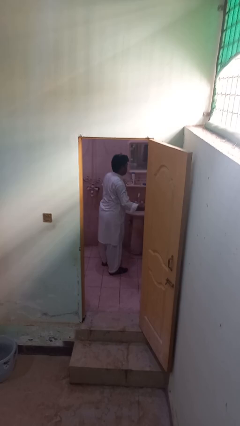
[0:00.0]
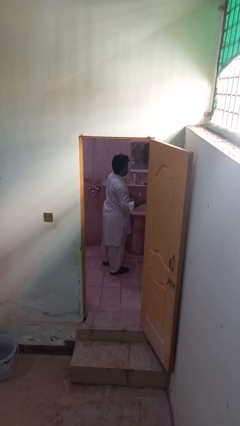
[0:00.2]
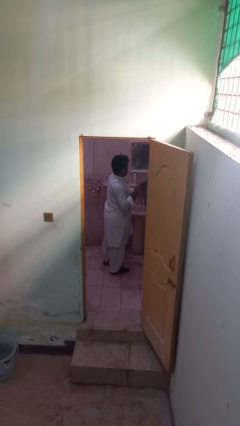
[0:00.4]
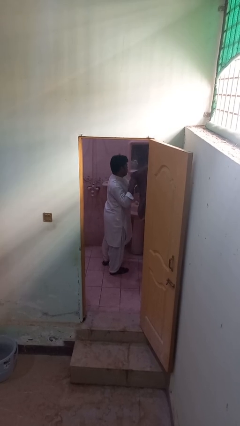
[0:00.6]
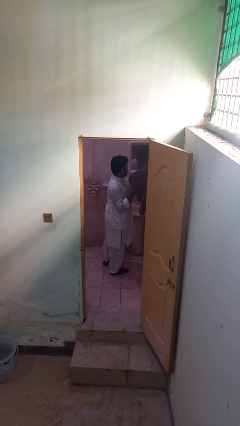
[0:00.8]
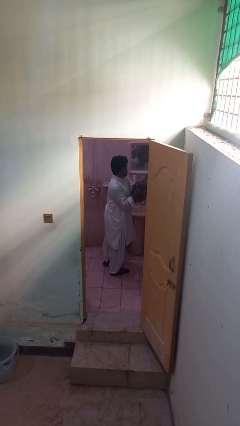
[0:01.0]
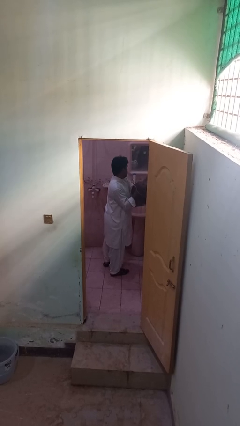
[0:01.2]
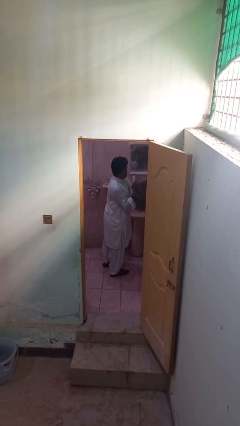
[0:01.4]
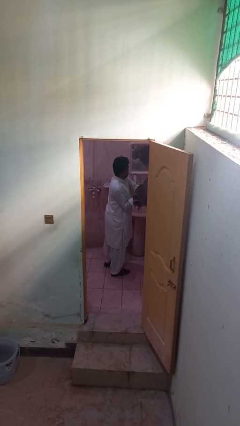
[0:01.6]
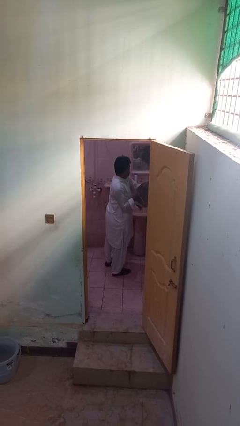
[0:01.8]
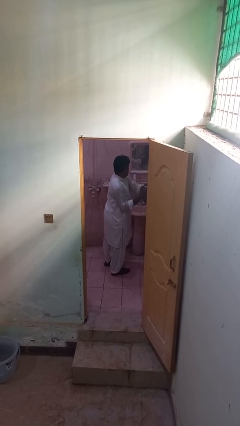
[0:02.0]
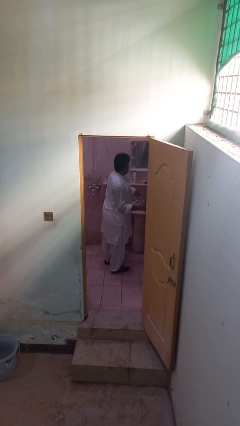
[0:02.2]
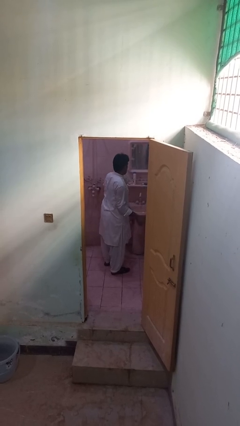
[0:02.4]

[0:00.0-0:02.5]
person dries hands with towel

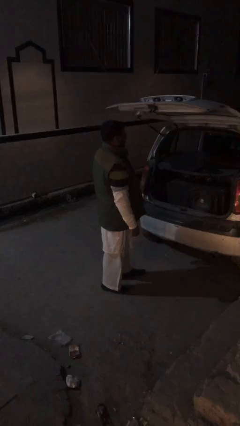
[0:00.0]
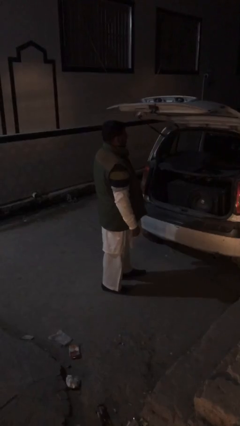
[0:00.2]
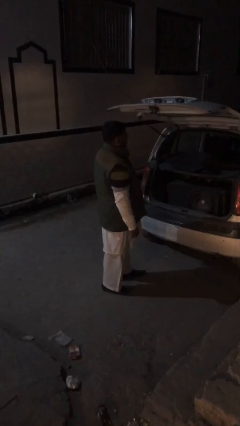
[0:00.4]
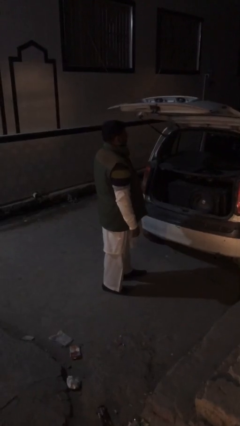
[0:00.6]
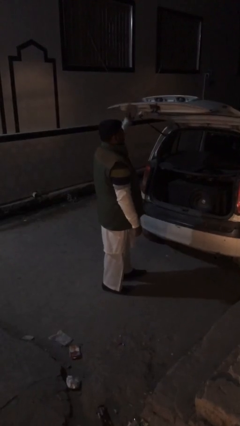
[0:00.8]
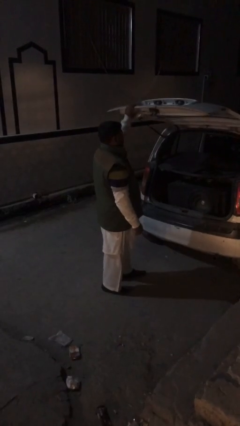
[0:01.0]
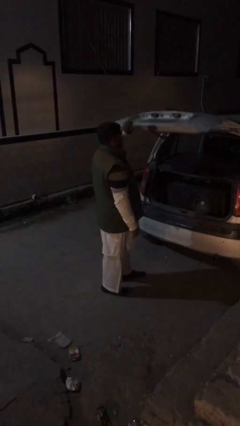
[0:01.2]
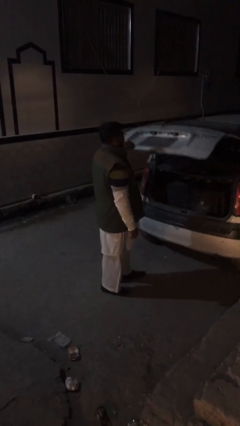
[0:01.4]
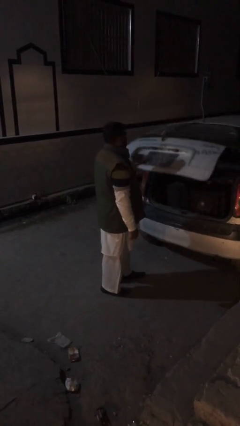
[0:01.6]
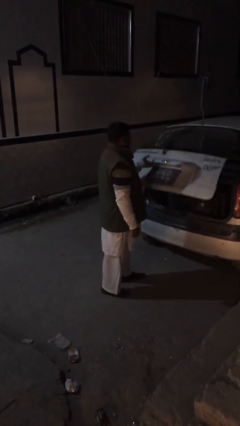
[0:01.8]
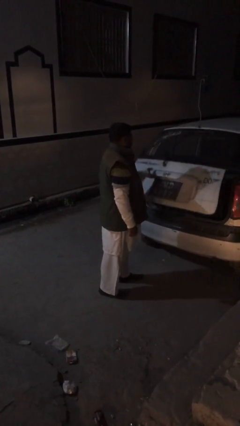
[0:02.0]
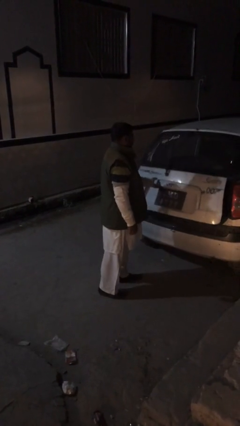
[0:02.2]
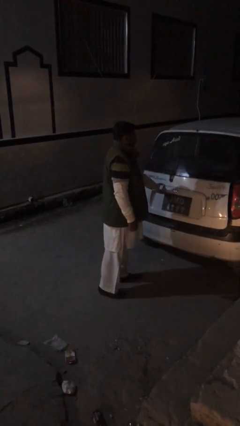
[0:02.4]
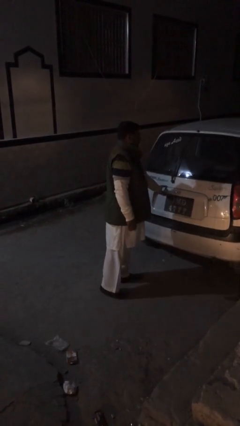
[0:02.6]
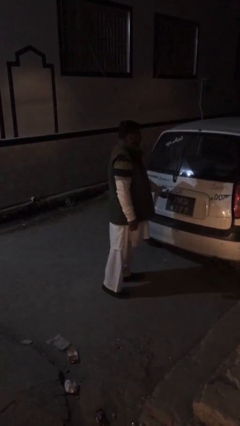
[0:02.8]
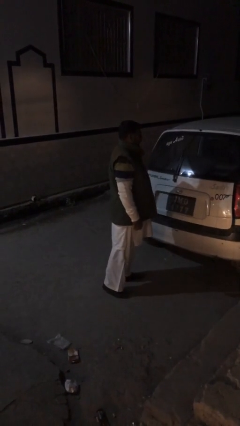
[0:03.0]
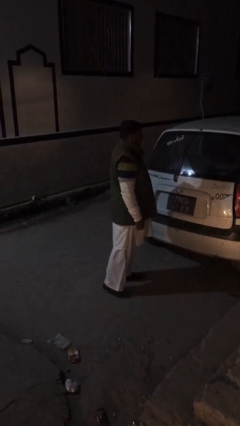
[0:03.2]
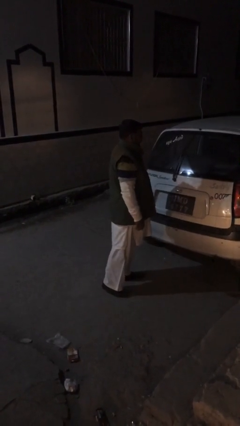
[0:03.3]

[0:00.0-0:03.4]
person closes car trunk

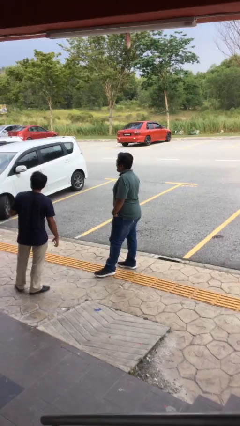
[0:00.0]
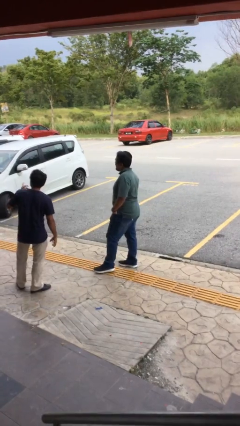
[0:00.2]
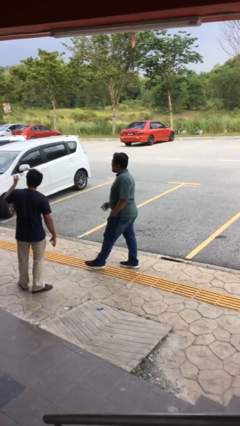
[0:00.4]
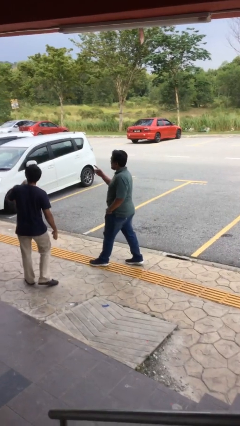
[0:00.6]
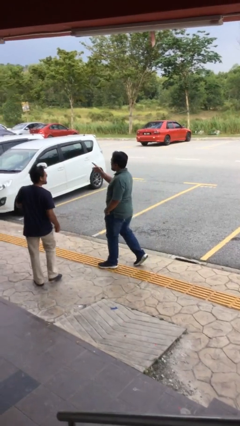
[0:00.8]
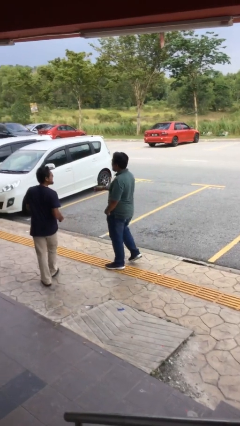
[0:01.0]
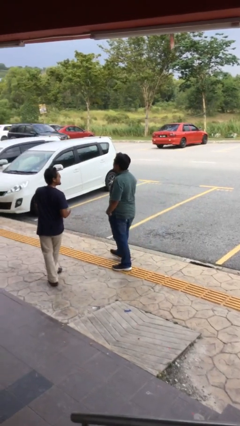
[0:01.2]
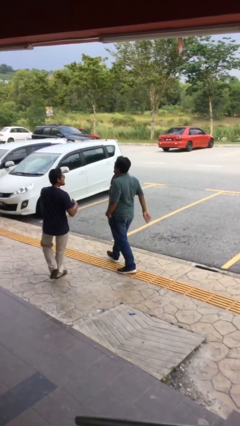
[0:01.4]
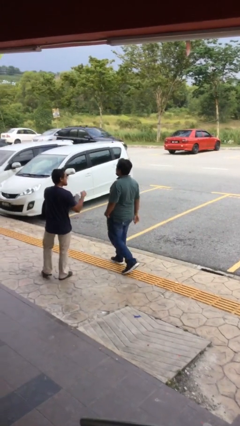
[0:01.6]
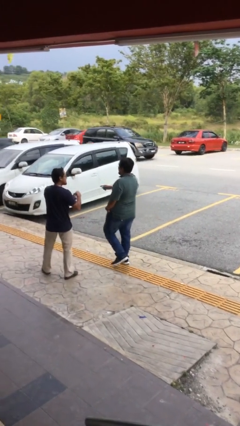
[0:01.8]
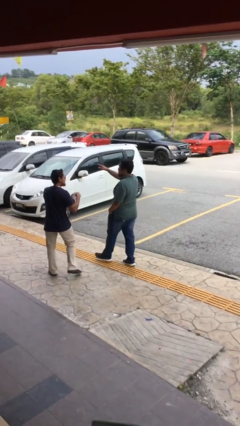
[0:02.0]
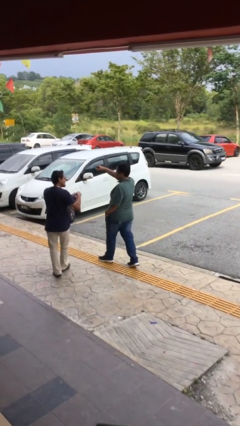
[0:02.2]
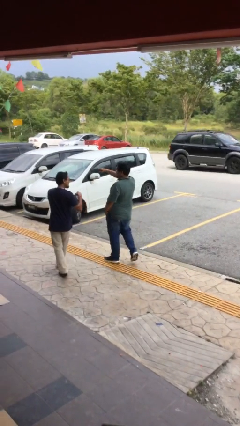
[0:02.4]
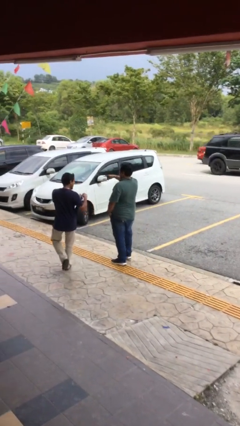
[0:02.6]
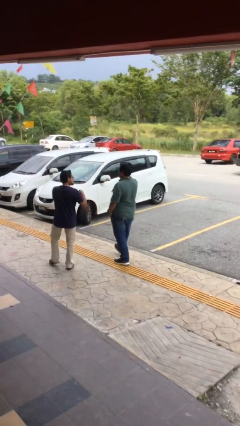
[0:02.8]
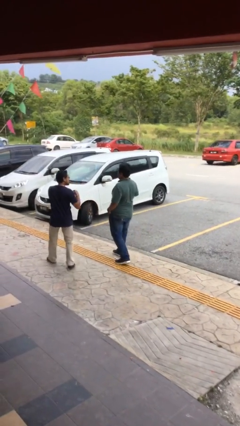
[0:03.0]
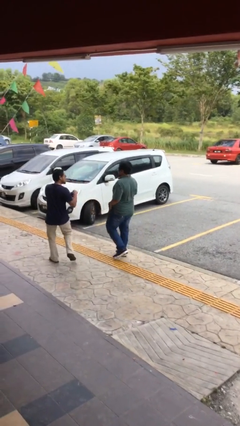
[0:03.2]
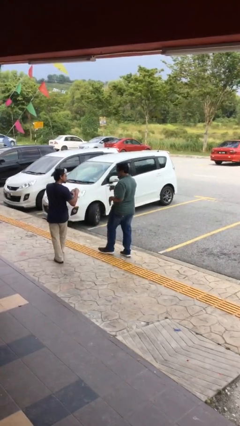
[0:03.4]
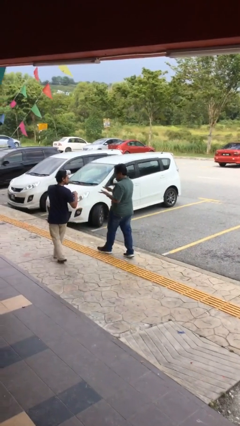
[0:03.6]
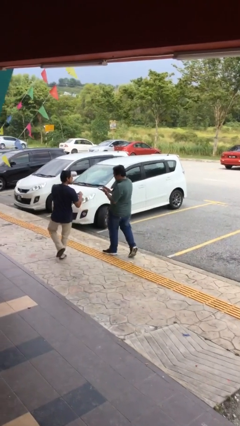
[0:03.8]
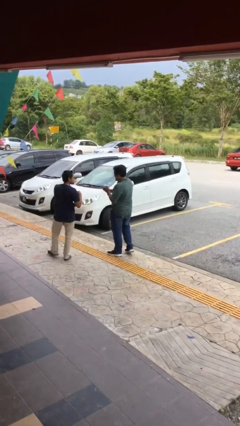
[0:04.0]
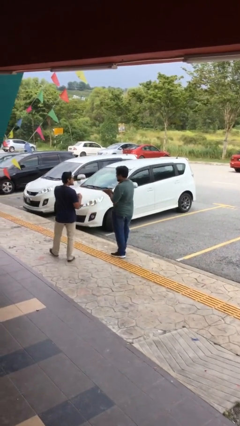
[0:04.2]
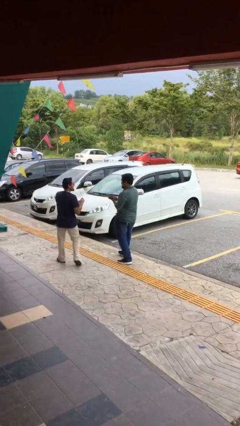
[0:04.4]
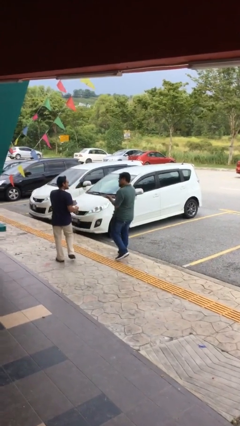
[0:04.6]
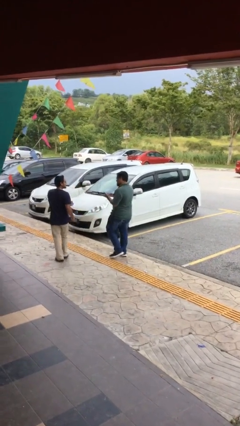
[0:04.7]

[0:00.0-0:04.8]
person talks to person

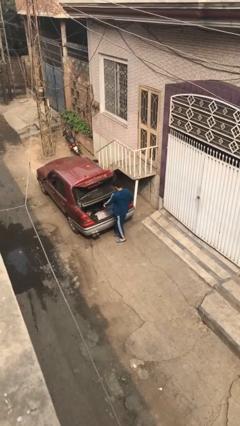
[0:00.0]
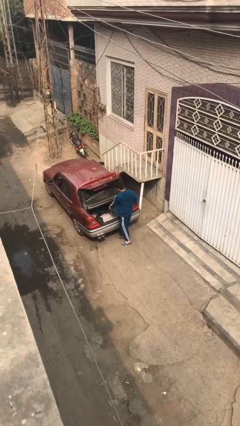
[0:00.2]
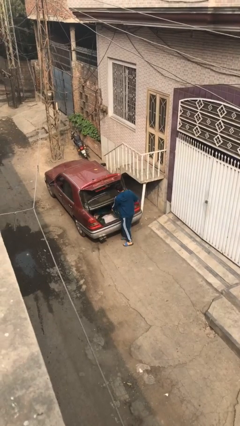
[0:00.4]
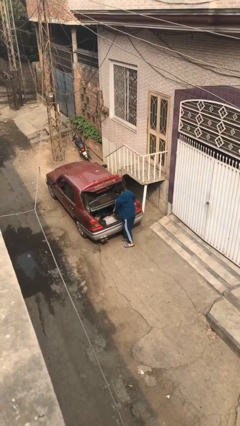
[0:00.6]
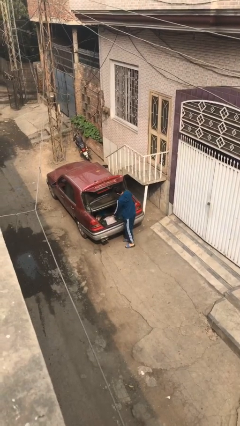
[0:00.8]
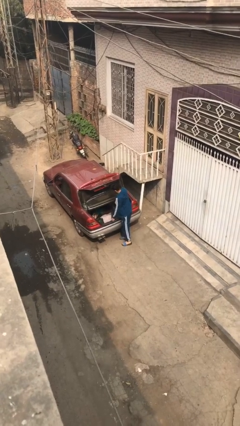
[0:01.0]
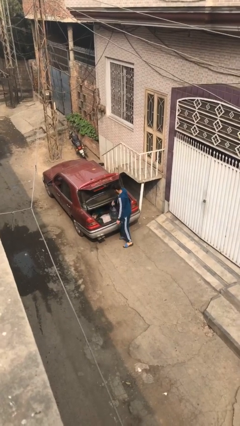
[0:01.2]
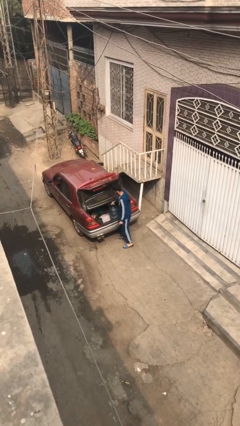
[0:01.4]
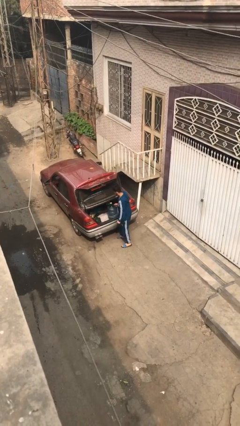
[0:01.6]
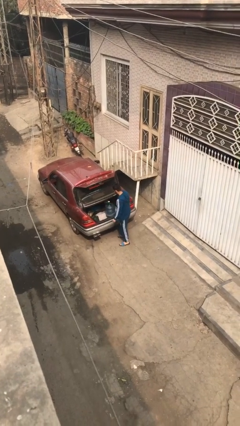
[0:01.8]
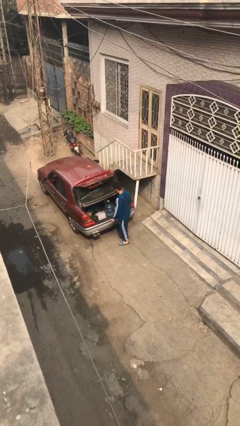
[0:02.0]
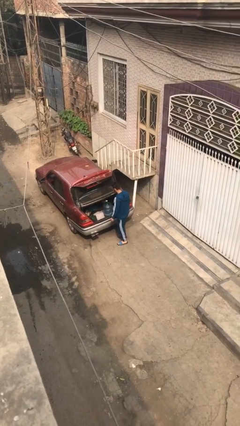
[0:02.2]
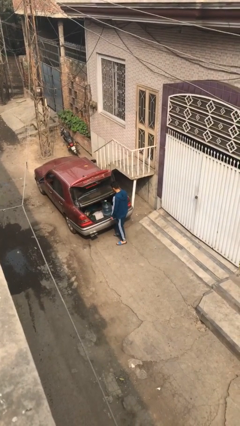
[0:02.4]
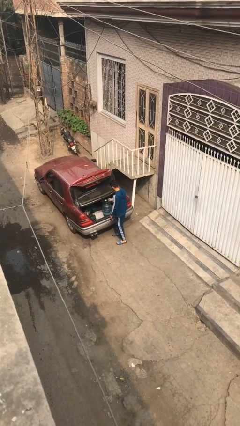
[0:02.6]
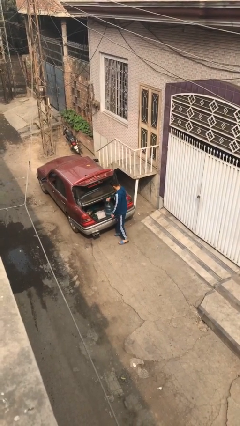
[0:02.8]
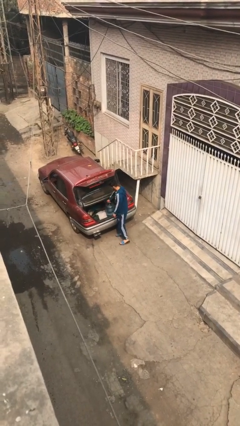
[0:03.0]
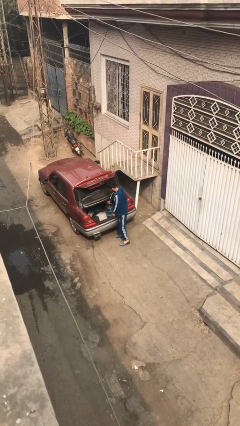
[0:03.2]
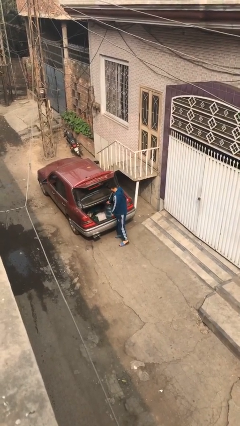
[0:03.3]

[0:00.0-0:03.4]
person loads car

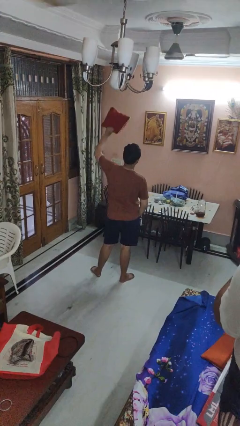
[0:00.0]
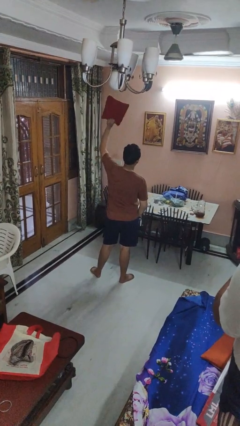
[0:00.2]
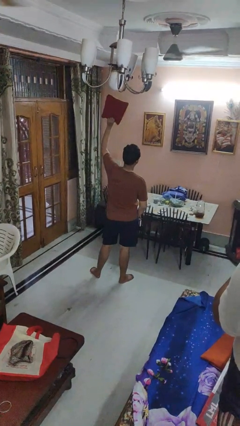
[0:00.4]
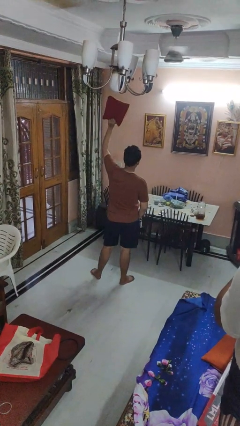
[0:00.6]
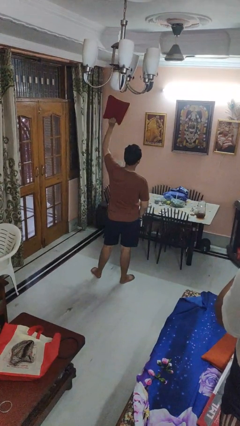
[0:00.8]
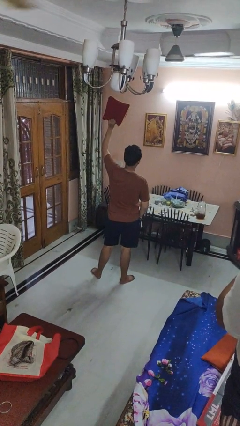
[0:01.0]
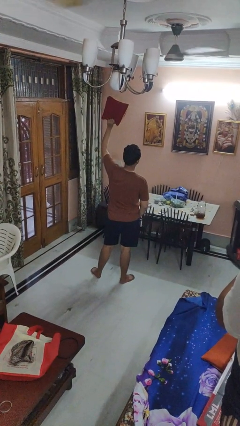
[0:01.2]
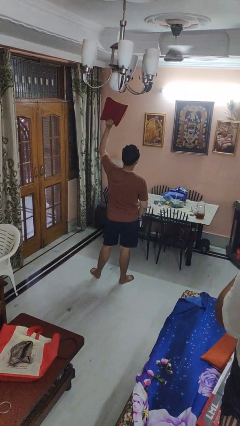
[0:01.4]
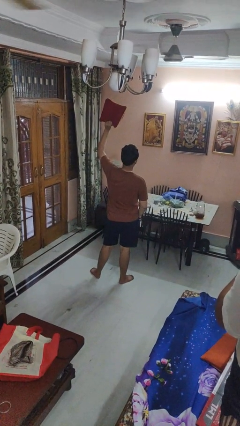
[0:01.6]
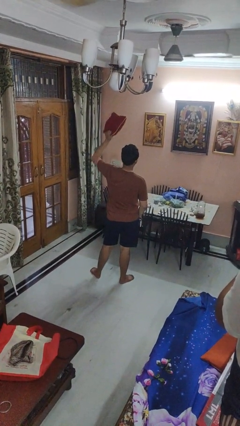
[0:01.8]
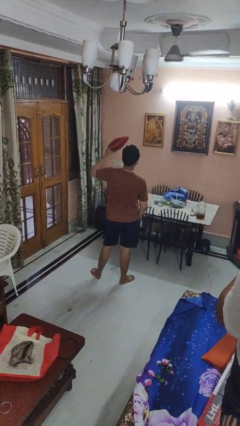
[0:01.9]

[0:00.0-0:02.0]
person holds object above head

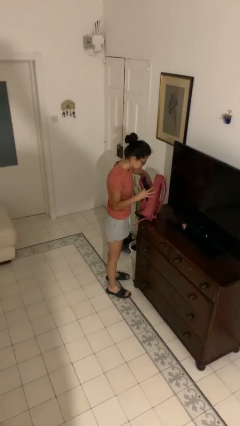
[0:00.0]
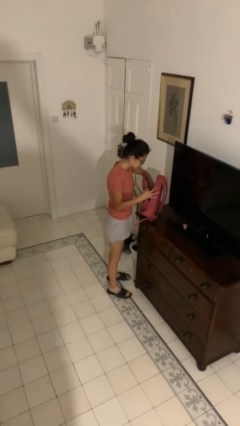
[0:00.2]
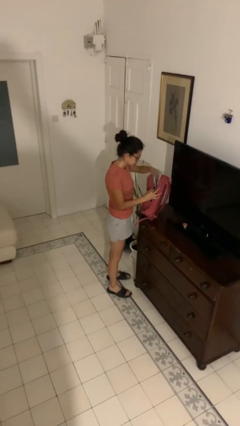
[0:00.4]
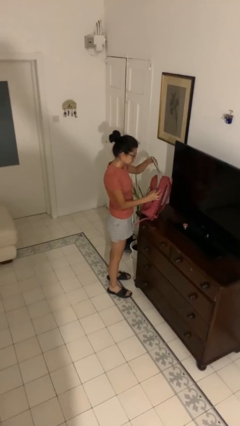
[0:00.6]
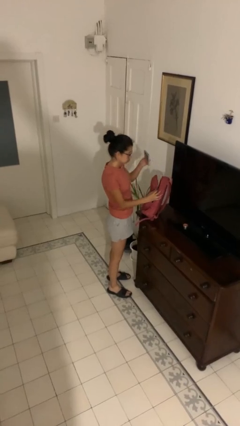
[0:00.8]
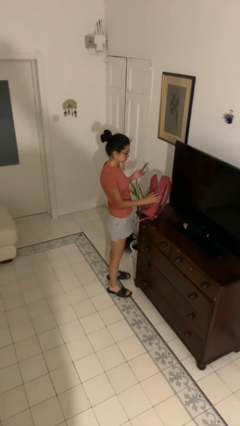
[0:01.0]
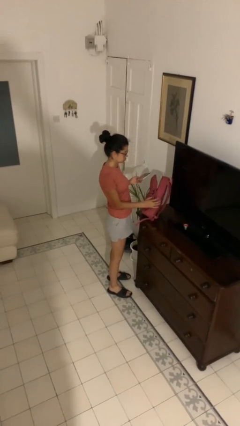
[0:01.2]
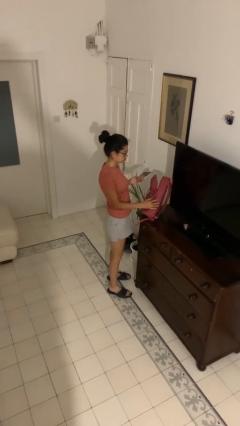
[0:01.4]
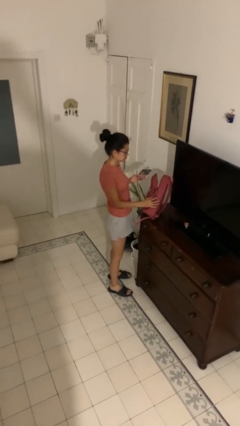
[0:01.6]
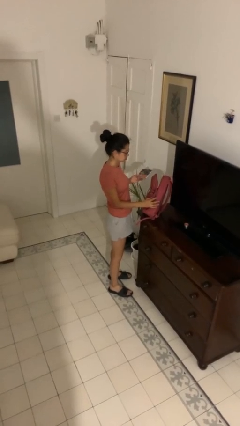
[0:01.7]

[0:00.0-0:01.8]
person takes object from backpack
